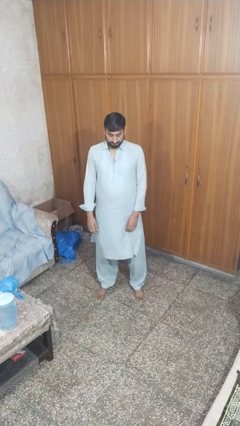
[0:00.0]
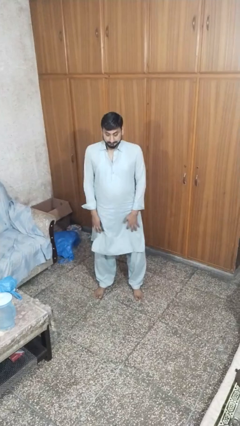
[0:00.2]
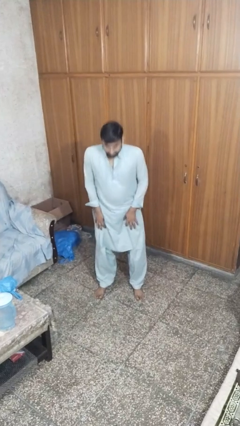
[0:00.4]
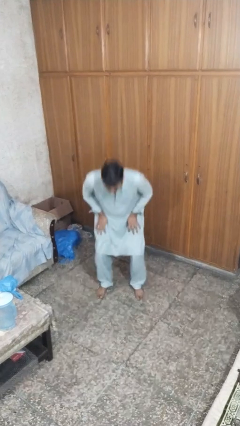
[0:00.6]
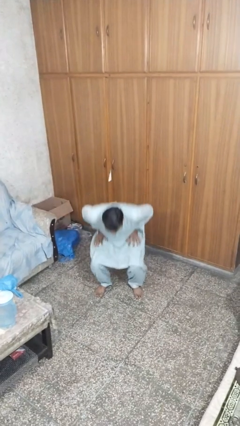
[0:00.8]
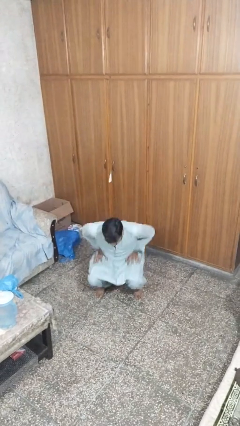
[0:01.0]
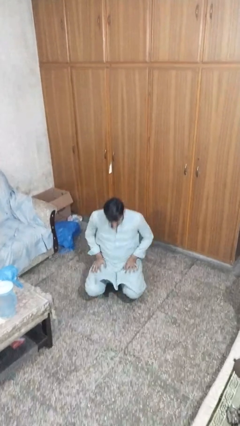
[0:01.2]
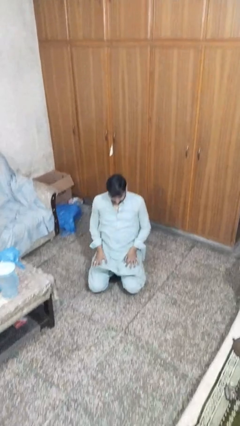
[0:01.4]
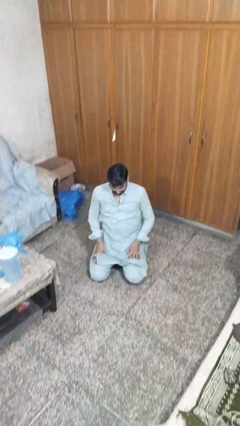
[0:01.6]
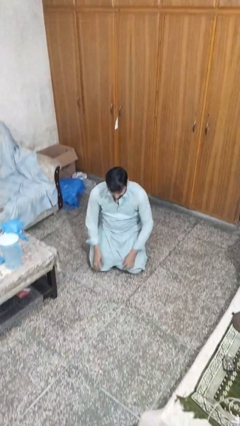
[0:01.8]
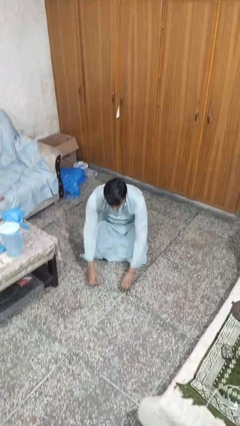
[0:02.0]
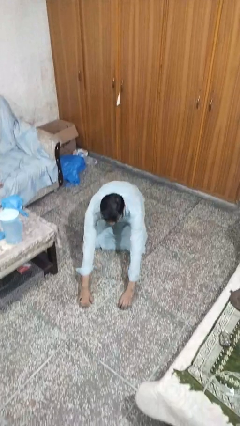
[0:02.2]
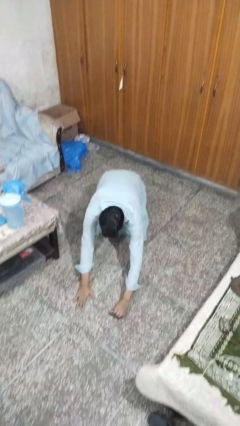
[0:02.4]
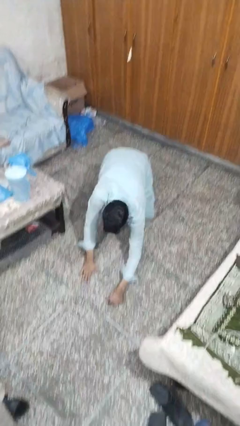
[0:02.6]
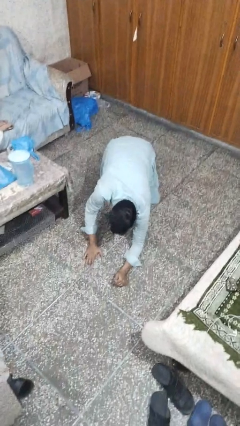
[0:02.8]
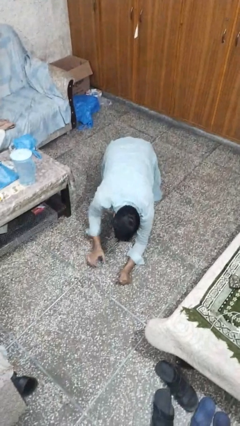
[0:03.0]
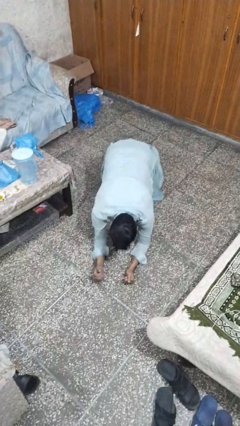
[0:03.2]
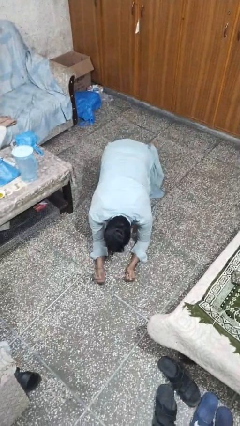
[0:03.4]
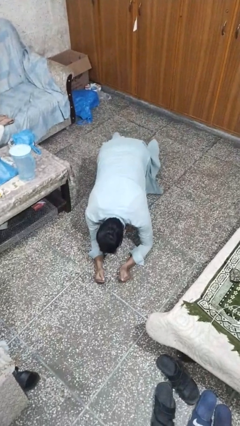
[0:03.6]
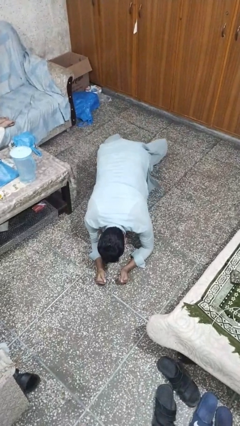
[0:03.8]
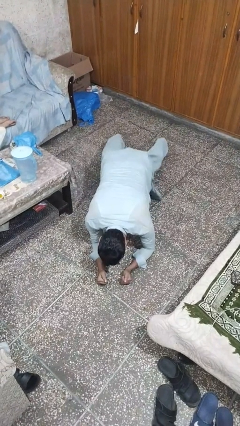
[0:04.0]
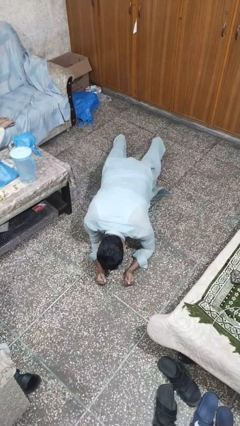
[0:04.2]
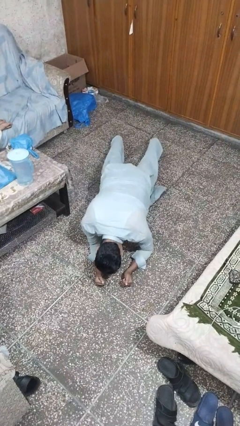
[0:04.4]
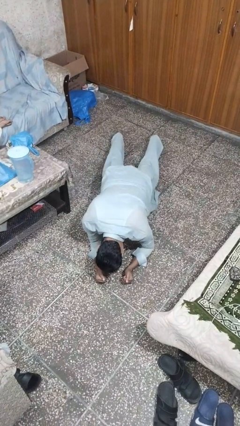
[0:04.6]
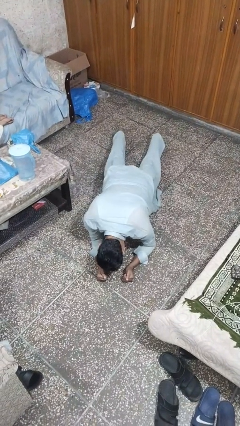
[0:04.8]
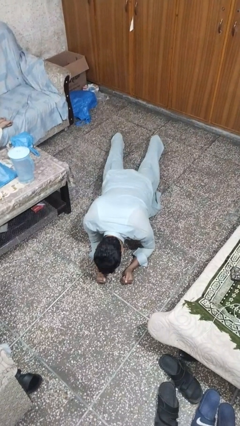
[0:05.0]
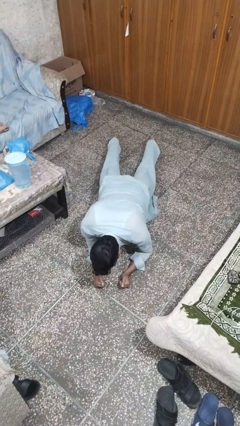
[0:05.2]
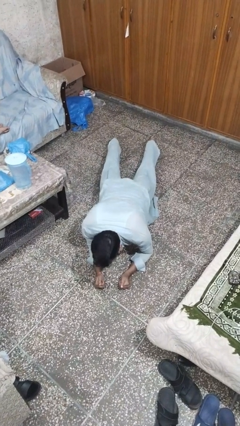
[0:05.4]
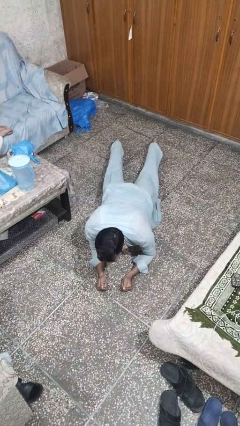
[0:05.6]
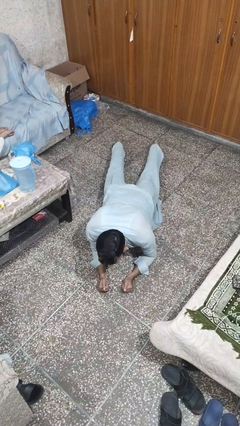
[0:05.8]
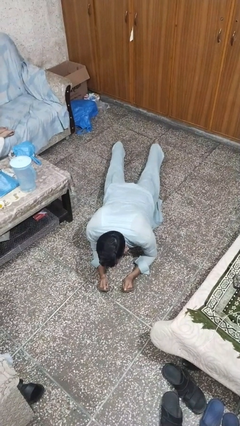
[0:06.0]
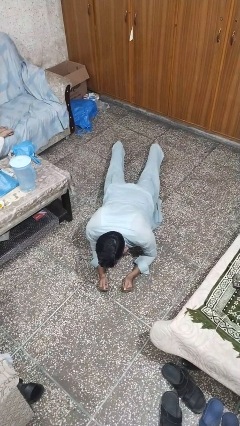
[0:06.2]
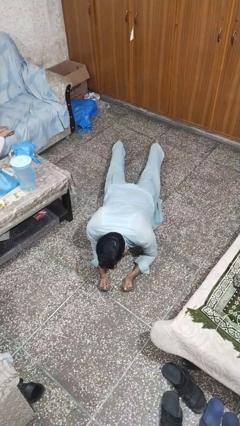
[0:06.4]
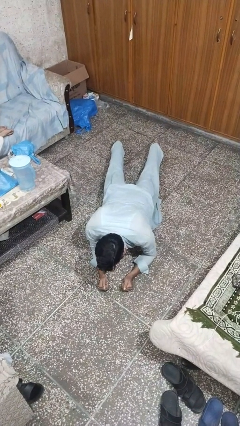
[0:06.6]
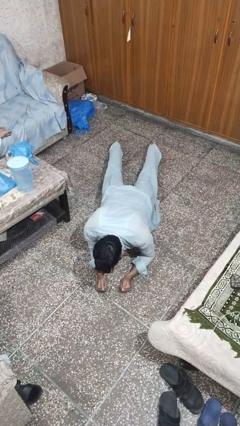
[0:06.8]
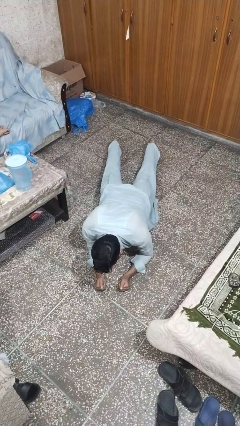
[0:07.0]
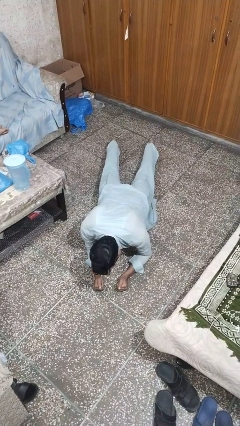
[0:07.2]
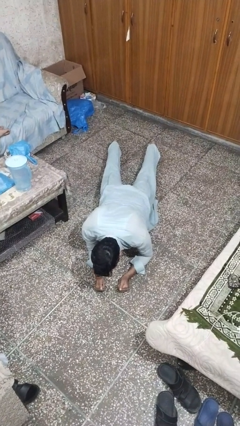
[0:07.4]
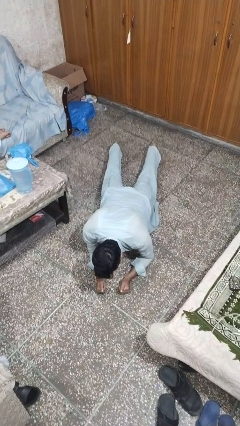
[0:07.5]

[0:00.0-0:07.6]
person exercises with plank

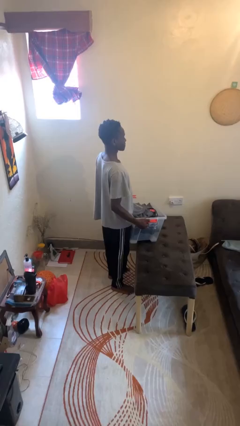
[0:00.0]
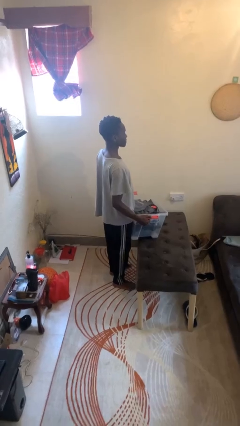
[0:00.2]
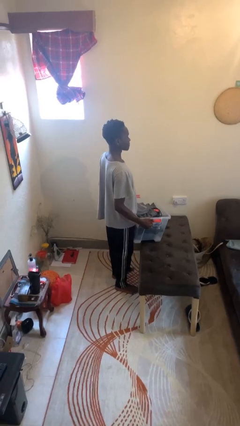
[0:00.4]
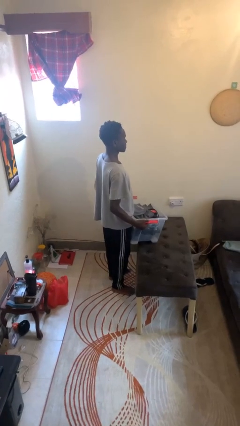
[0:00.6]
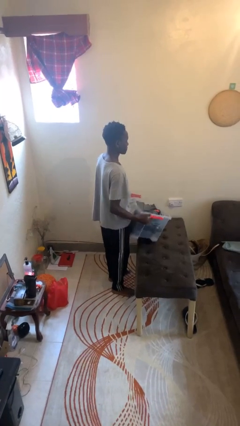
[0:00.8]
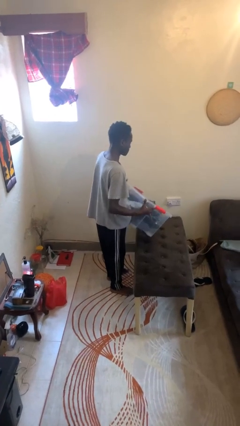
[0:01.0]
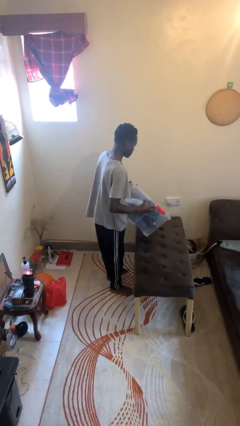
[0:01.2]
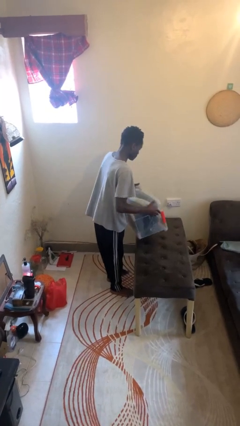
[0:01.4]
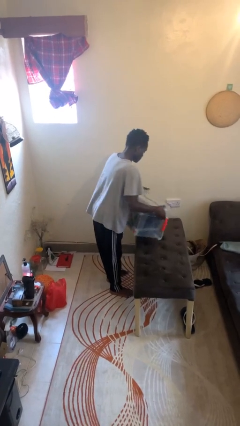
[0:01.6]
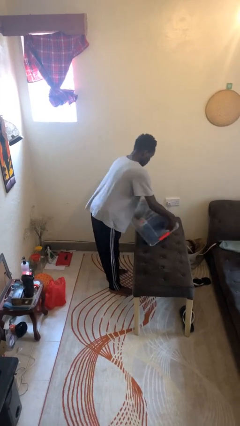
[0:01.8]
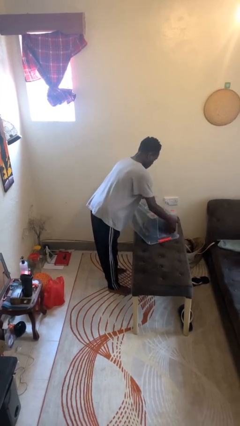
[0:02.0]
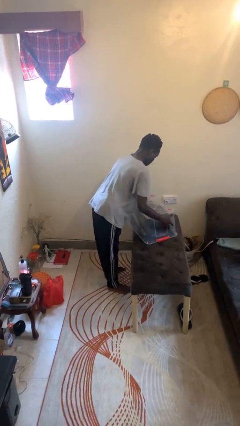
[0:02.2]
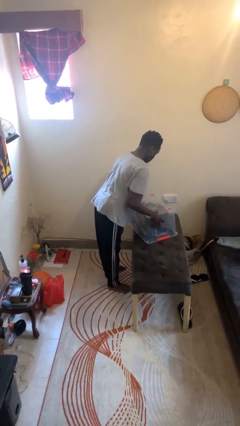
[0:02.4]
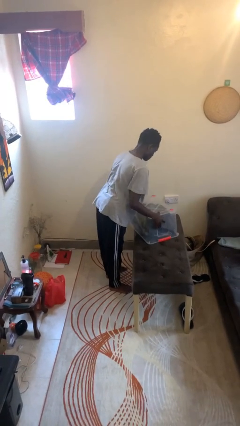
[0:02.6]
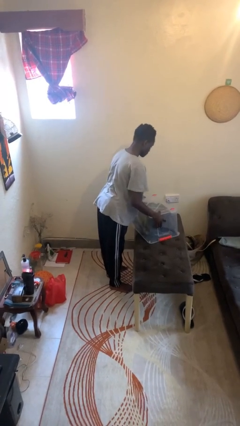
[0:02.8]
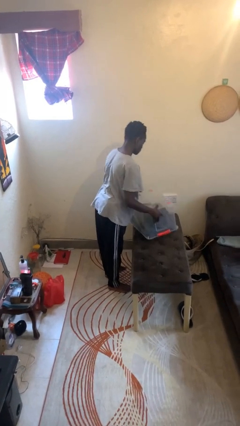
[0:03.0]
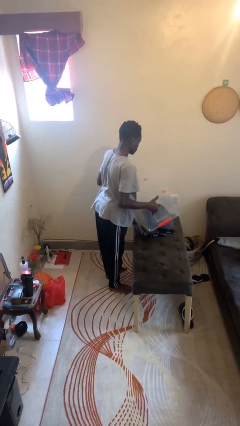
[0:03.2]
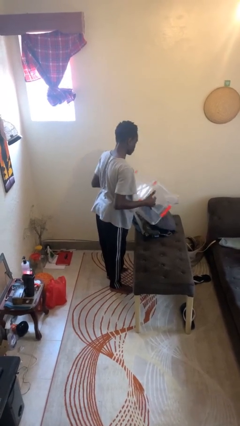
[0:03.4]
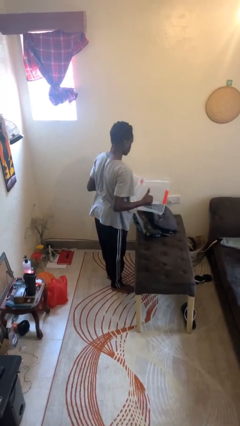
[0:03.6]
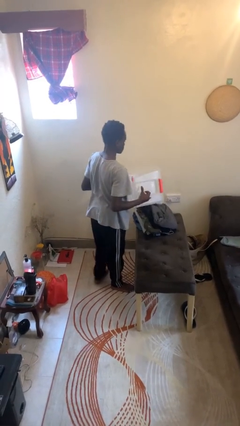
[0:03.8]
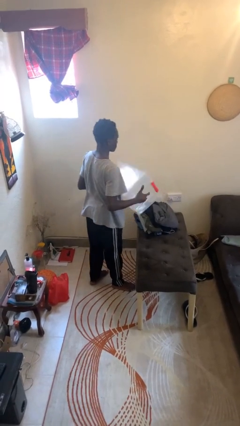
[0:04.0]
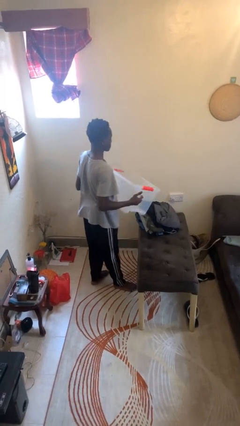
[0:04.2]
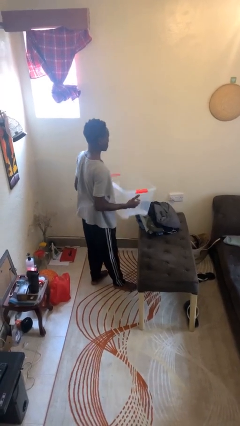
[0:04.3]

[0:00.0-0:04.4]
person unloads box onto table

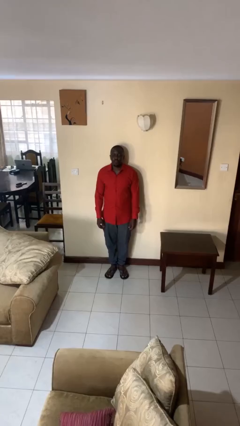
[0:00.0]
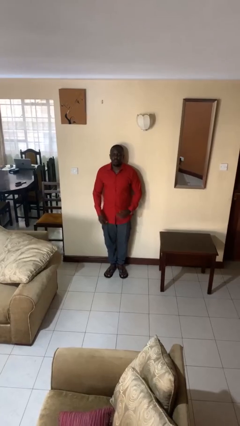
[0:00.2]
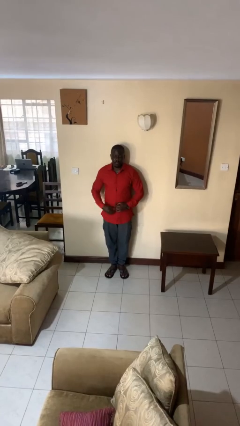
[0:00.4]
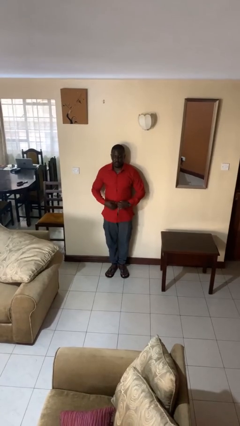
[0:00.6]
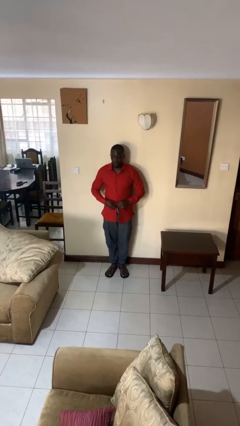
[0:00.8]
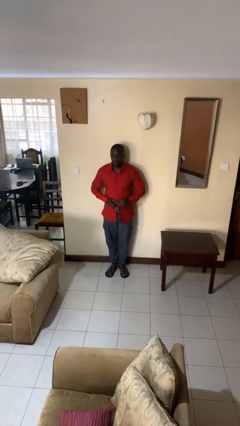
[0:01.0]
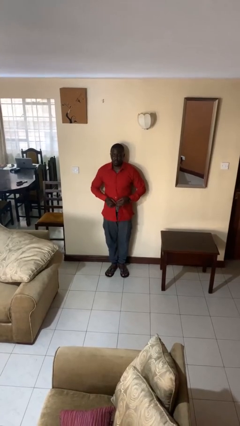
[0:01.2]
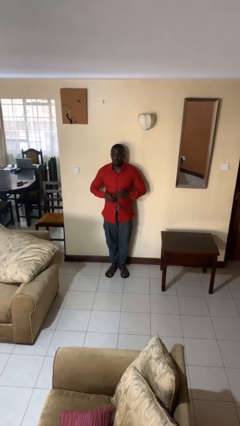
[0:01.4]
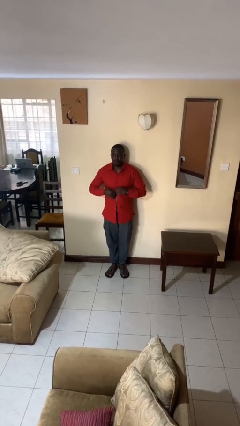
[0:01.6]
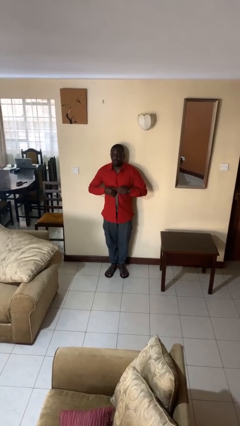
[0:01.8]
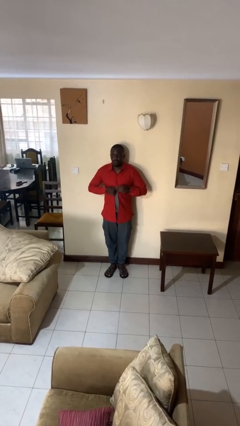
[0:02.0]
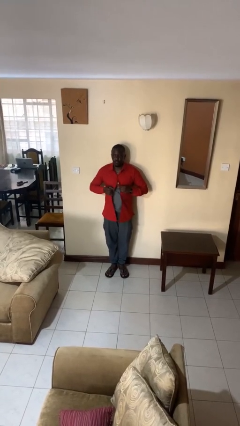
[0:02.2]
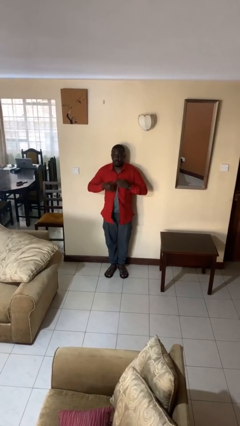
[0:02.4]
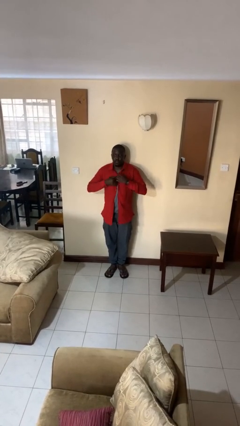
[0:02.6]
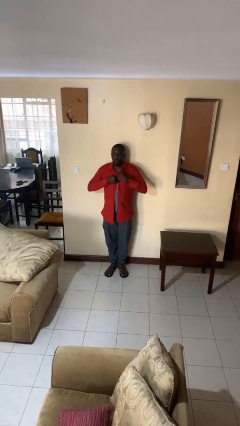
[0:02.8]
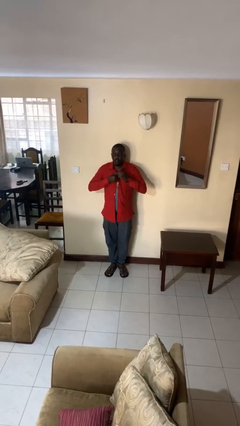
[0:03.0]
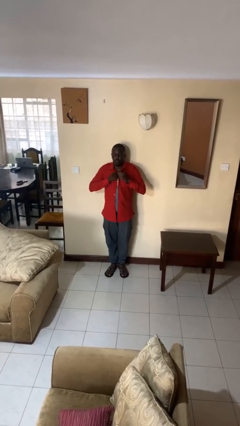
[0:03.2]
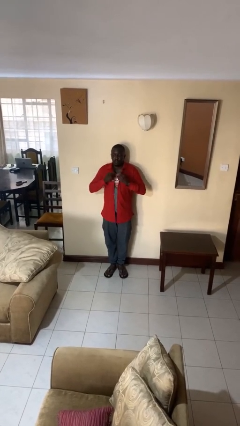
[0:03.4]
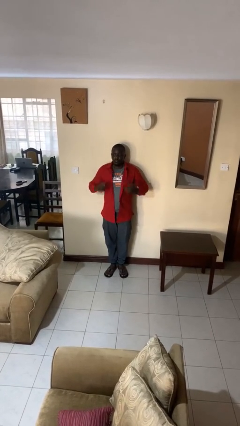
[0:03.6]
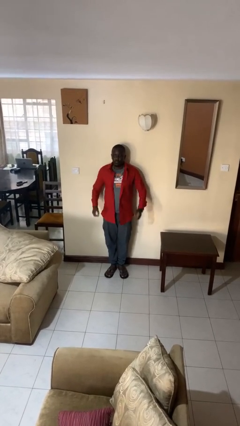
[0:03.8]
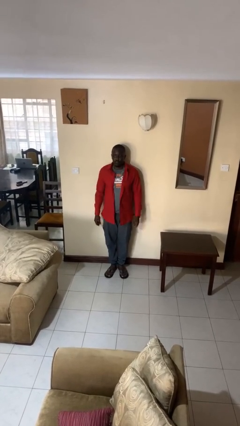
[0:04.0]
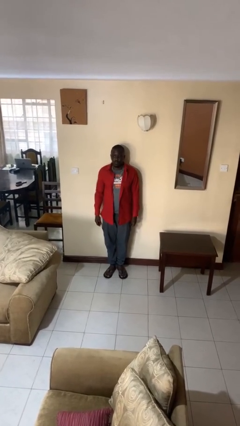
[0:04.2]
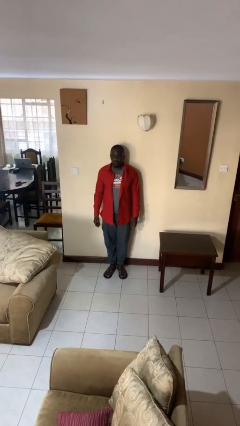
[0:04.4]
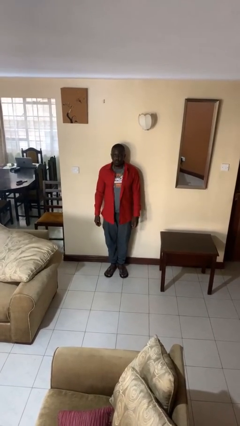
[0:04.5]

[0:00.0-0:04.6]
person unbuttons shirt

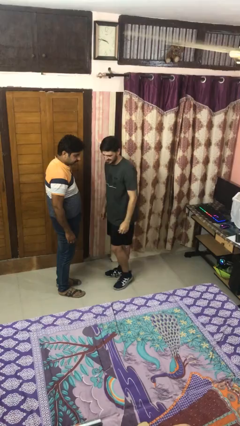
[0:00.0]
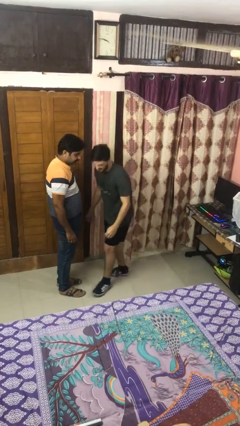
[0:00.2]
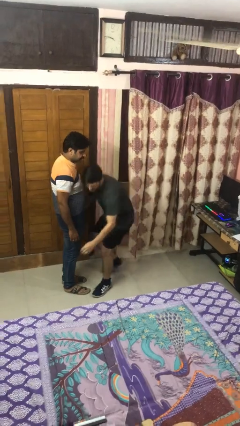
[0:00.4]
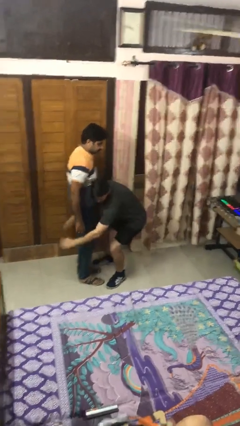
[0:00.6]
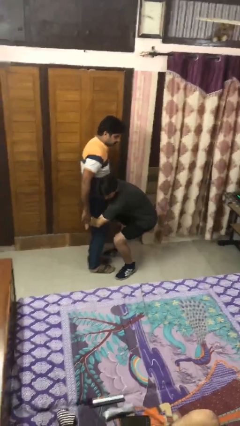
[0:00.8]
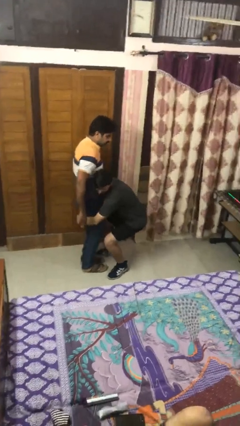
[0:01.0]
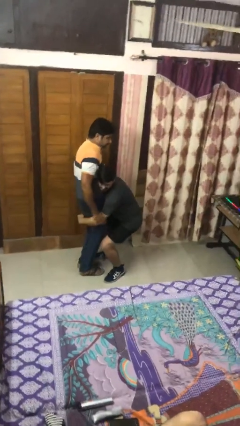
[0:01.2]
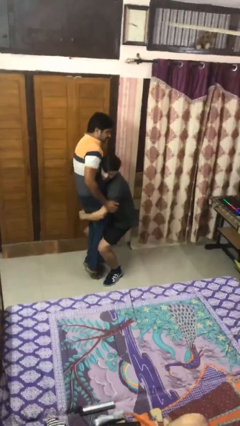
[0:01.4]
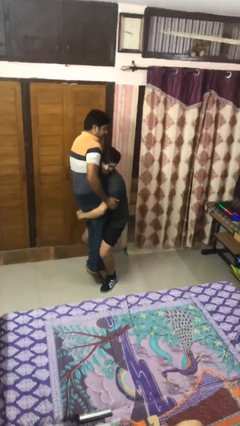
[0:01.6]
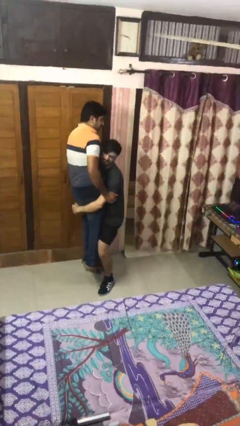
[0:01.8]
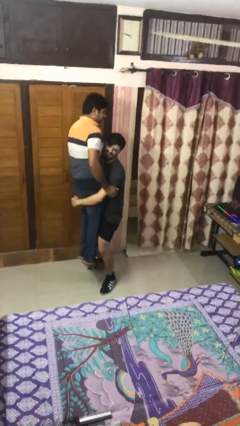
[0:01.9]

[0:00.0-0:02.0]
person picks up person
